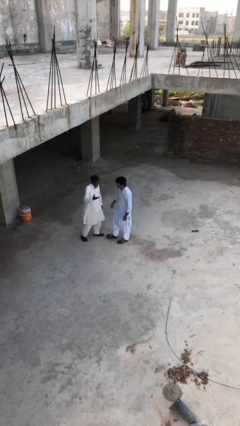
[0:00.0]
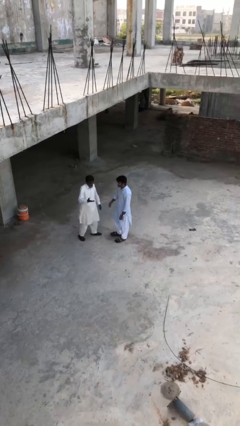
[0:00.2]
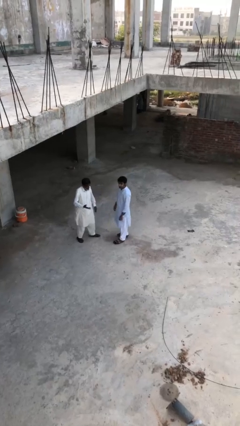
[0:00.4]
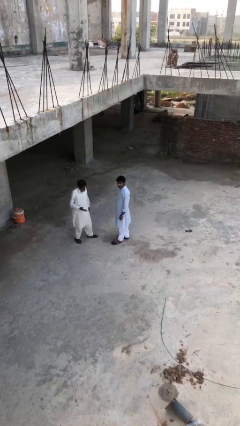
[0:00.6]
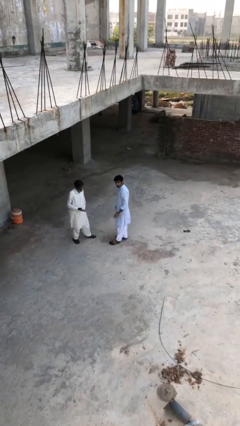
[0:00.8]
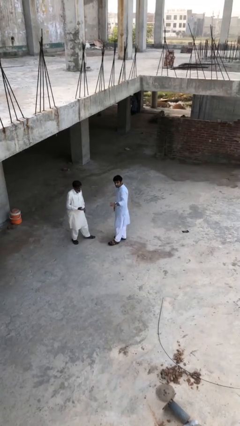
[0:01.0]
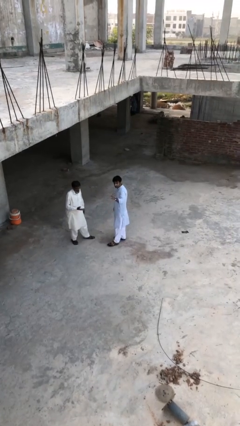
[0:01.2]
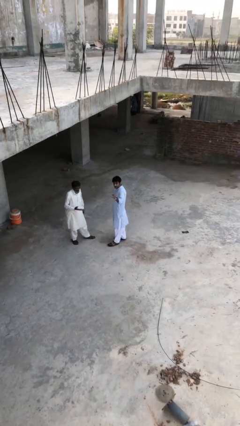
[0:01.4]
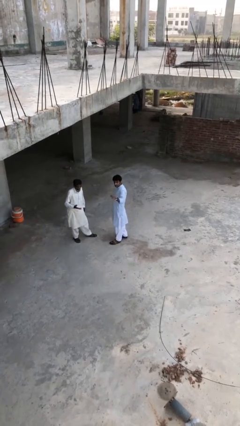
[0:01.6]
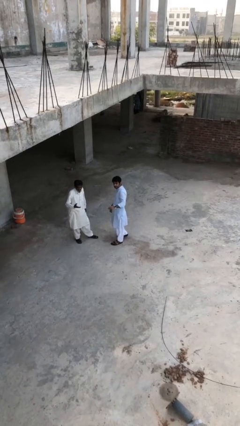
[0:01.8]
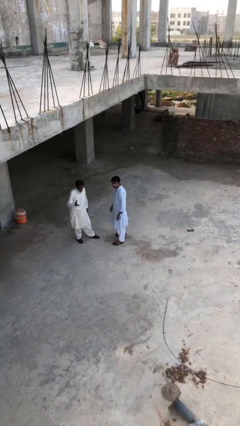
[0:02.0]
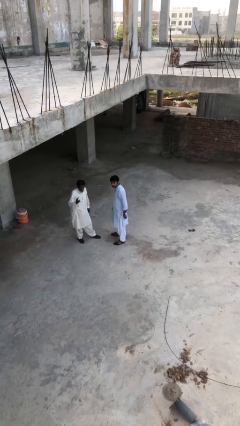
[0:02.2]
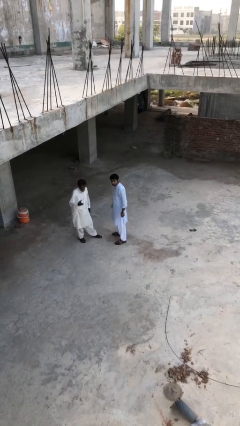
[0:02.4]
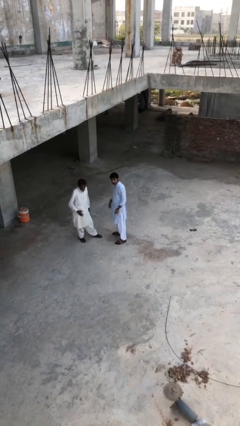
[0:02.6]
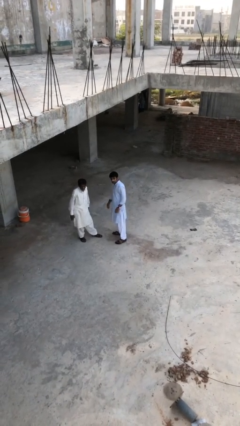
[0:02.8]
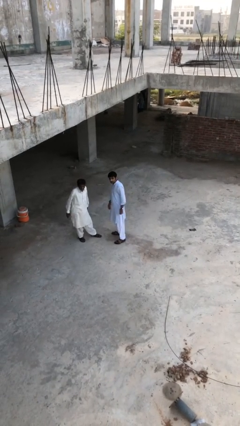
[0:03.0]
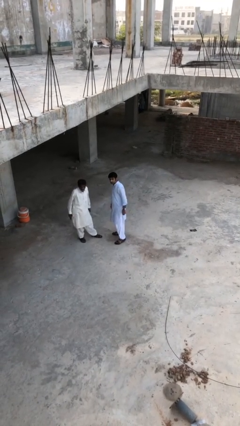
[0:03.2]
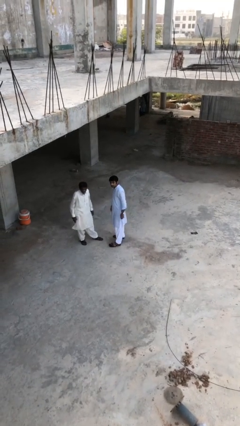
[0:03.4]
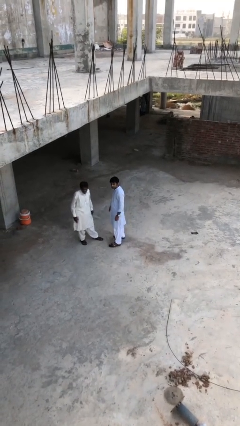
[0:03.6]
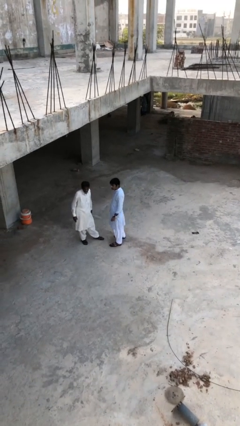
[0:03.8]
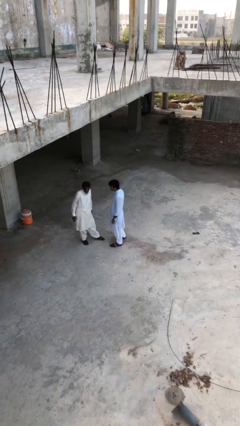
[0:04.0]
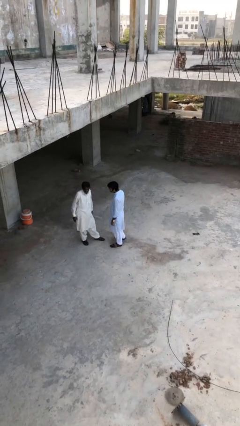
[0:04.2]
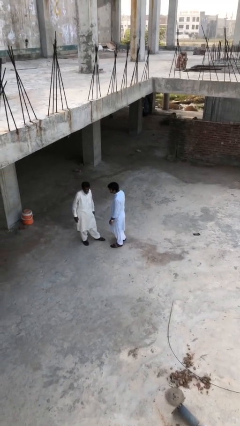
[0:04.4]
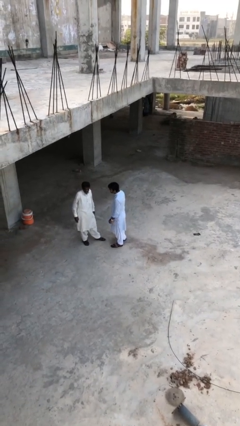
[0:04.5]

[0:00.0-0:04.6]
person talks to person

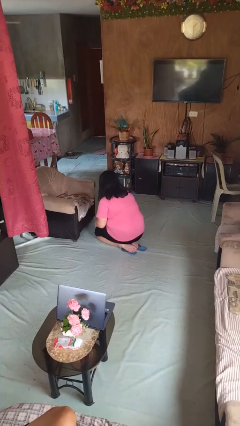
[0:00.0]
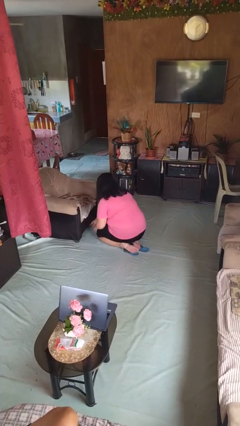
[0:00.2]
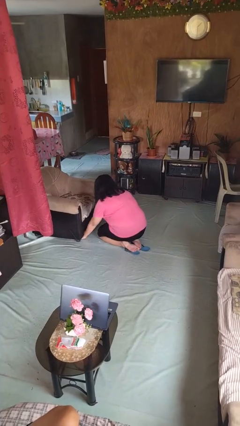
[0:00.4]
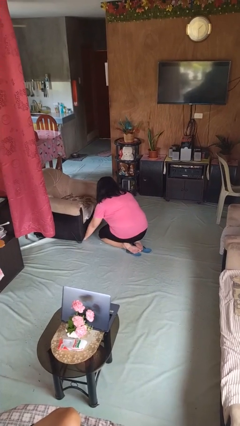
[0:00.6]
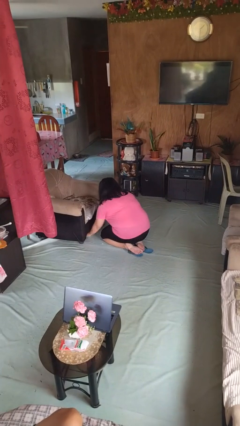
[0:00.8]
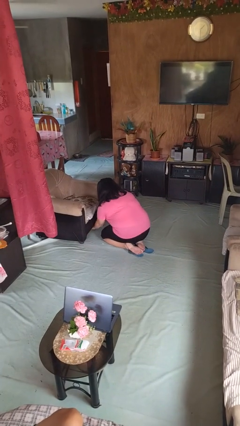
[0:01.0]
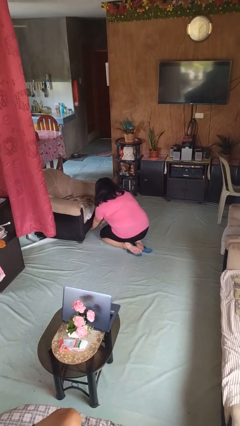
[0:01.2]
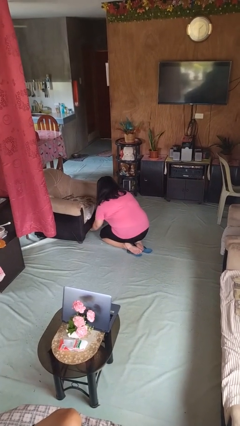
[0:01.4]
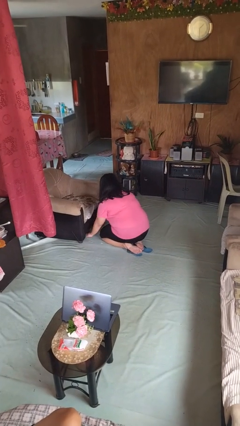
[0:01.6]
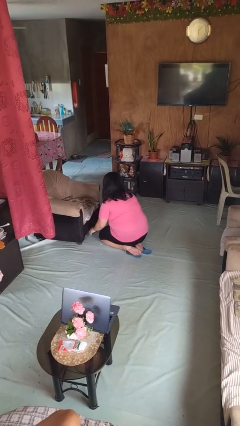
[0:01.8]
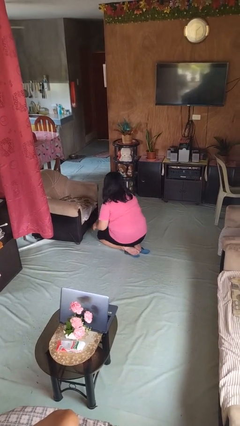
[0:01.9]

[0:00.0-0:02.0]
person searches under couch

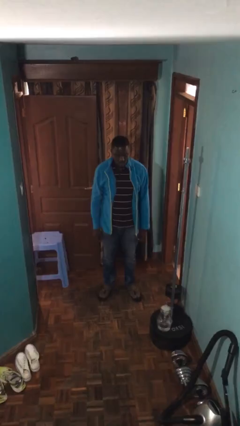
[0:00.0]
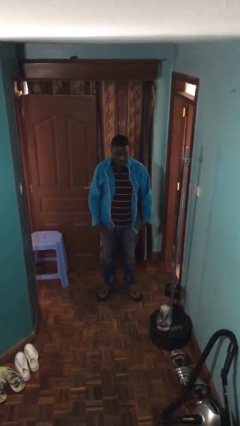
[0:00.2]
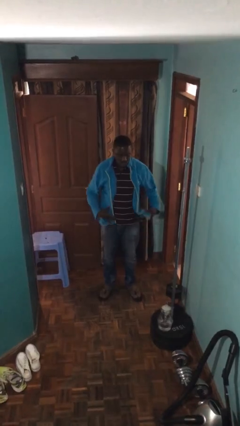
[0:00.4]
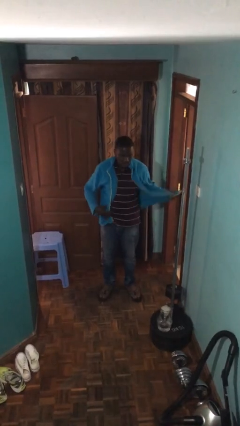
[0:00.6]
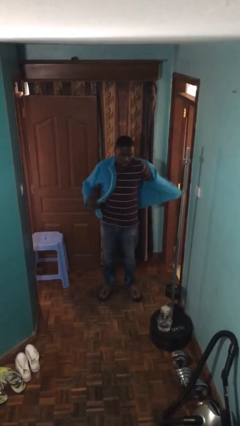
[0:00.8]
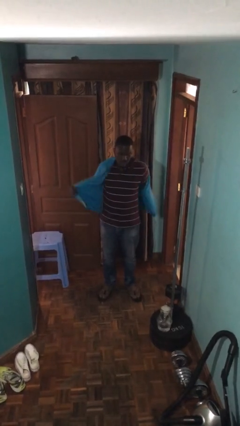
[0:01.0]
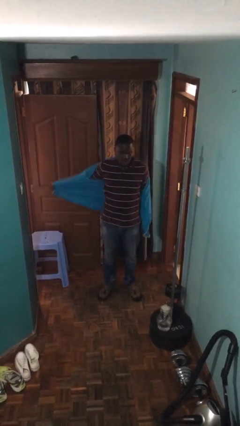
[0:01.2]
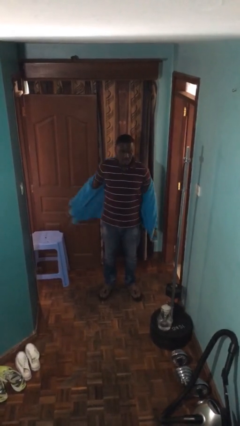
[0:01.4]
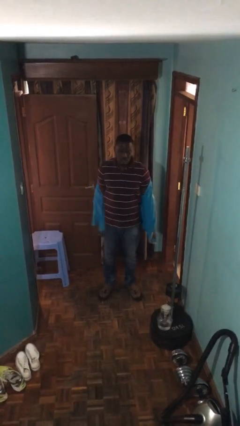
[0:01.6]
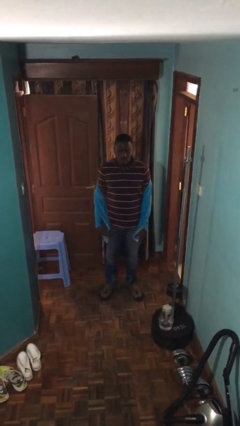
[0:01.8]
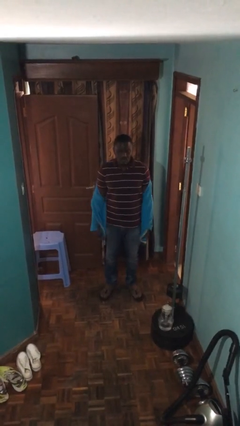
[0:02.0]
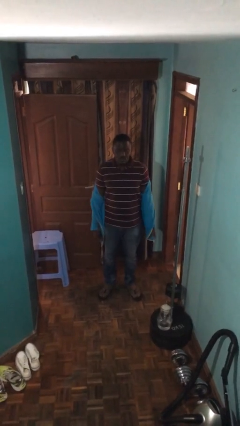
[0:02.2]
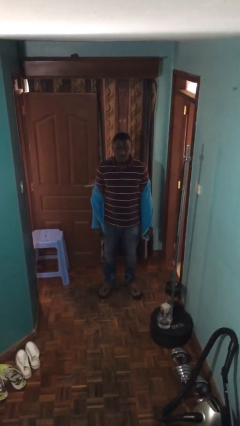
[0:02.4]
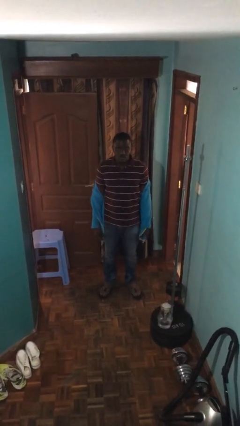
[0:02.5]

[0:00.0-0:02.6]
person takes off jacket

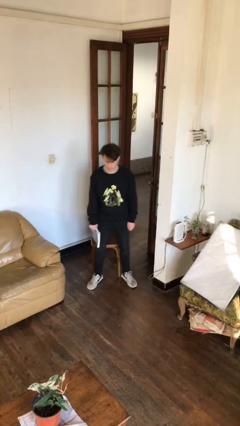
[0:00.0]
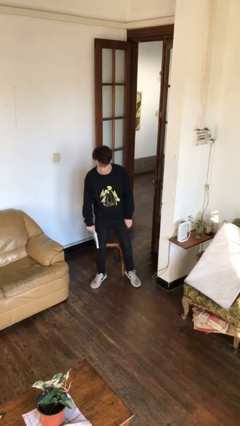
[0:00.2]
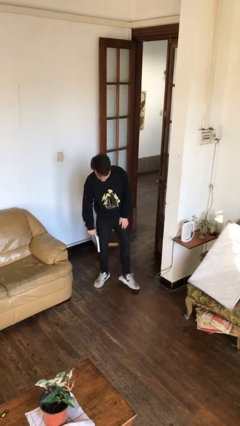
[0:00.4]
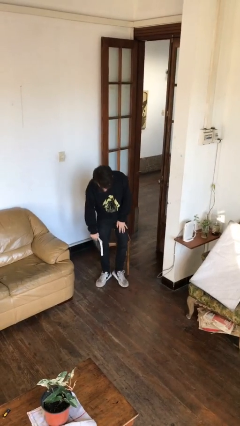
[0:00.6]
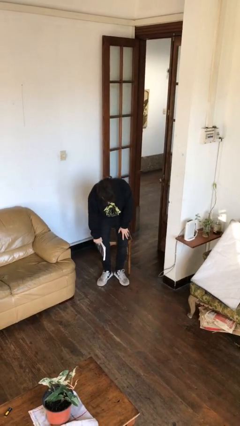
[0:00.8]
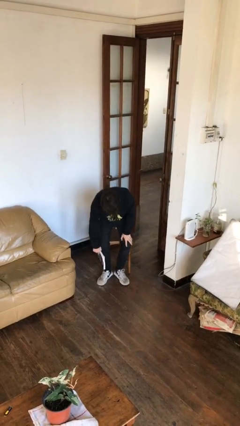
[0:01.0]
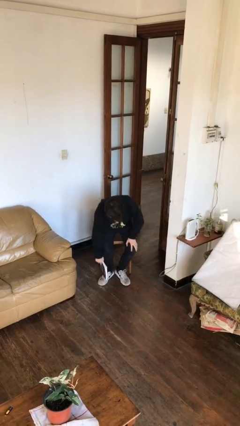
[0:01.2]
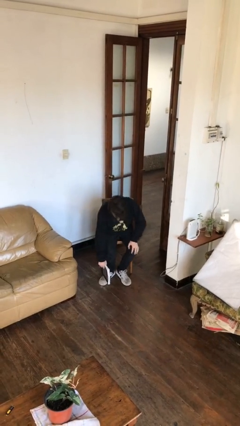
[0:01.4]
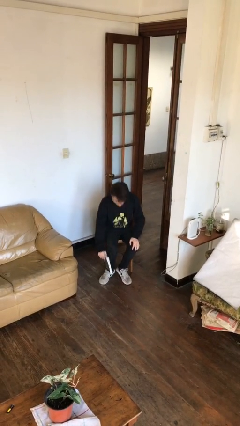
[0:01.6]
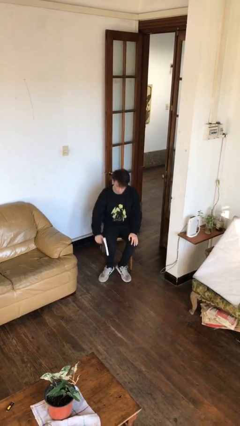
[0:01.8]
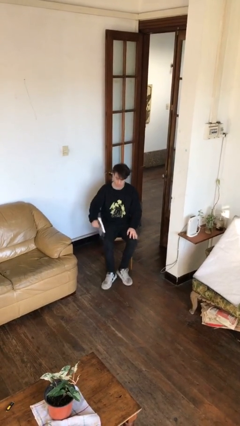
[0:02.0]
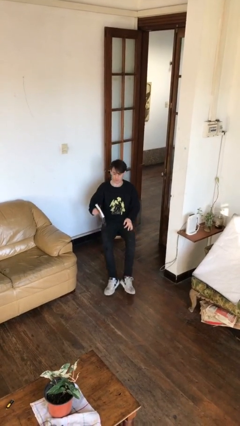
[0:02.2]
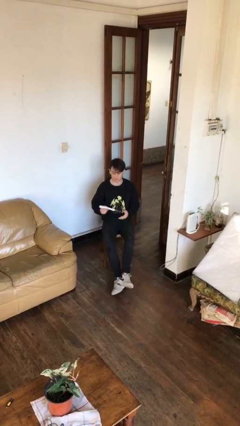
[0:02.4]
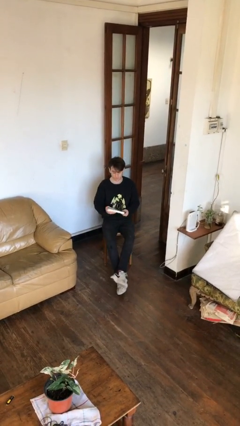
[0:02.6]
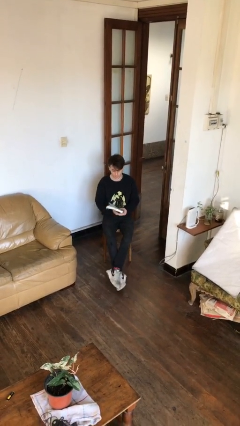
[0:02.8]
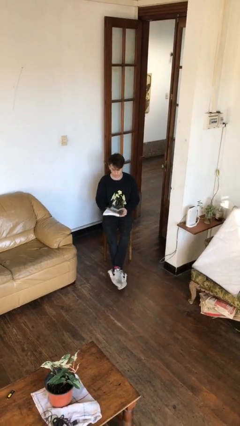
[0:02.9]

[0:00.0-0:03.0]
person sits down

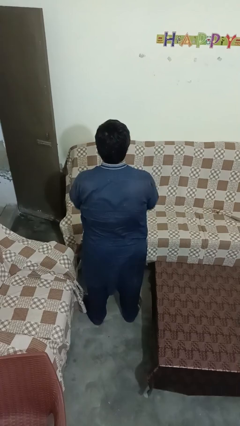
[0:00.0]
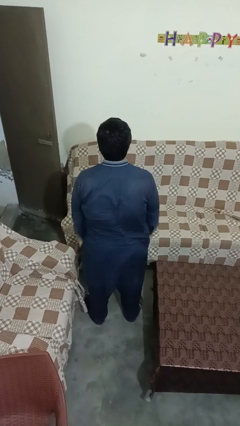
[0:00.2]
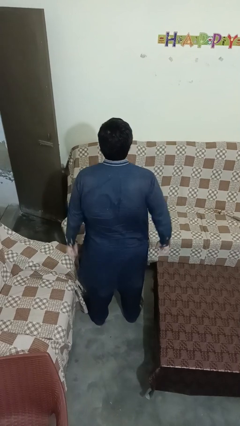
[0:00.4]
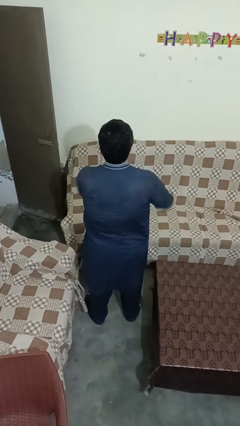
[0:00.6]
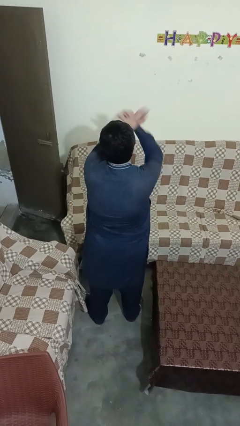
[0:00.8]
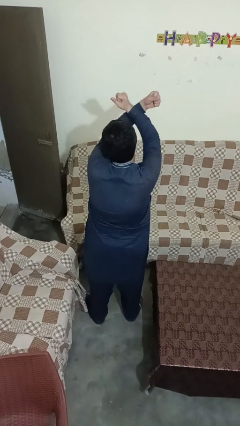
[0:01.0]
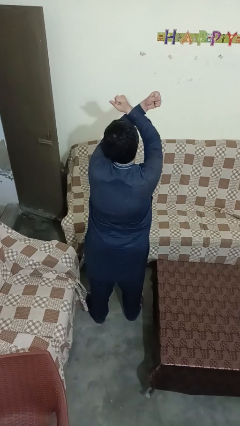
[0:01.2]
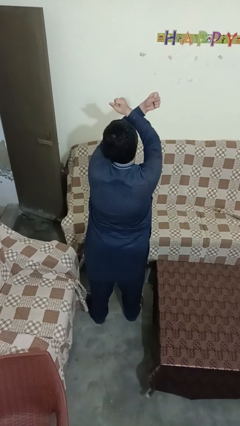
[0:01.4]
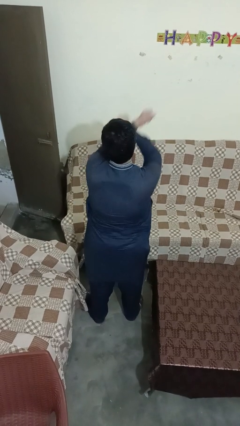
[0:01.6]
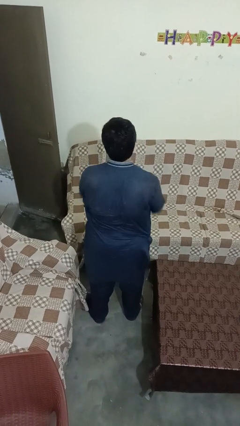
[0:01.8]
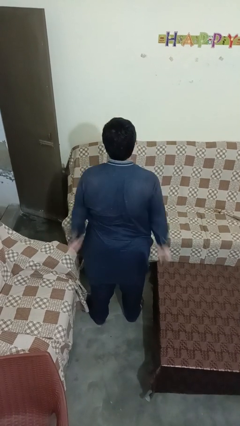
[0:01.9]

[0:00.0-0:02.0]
person gestures arms x

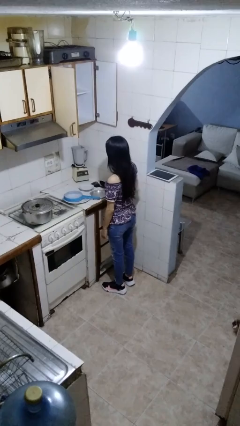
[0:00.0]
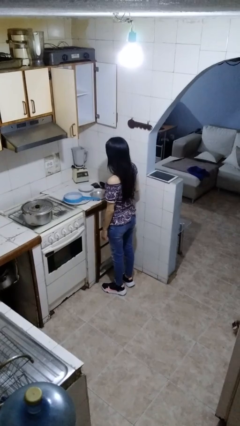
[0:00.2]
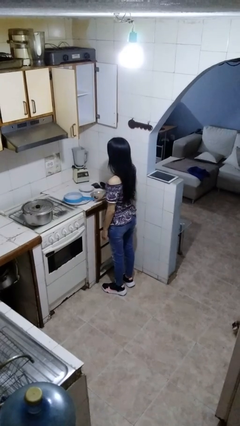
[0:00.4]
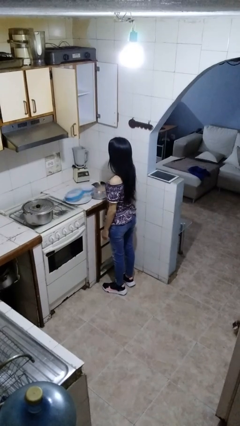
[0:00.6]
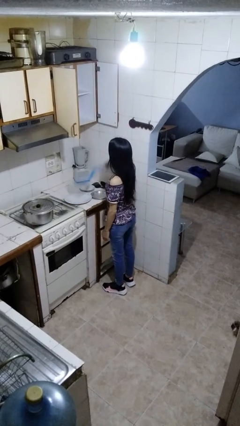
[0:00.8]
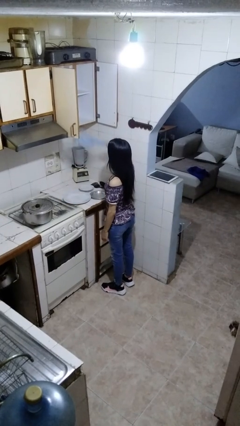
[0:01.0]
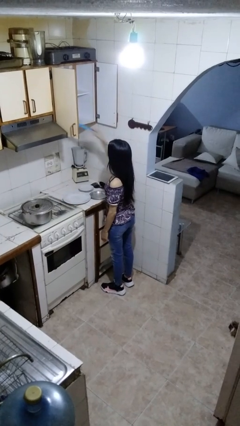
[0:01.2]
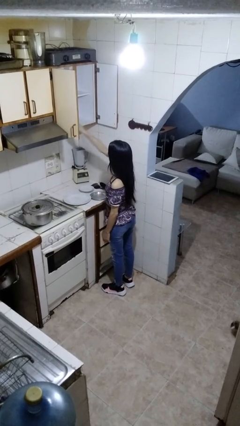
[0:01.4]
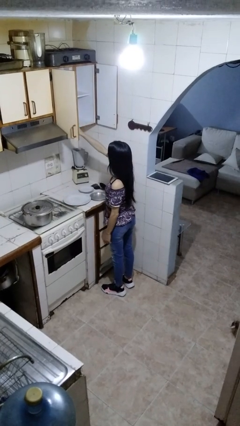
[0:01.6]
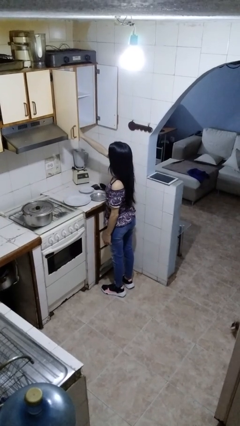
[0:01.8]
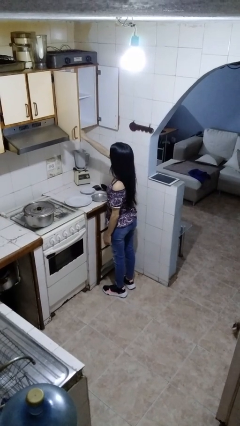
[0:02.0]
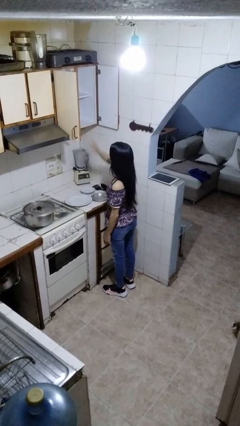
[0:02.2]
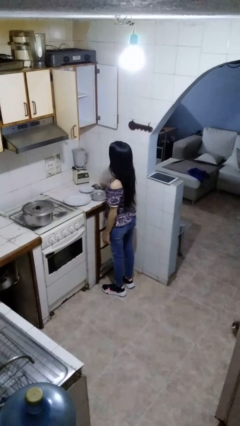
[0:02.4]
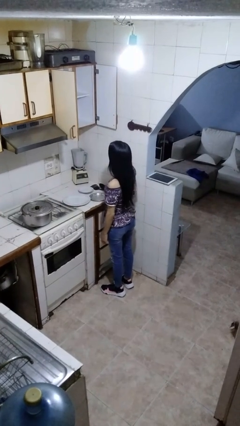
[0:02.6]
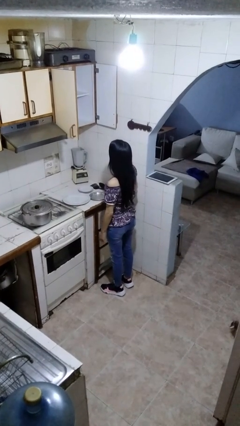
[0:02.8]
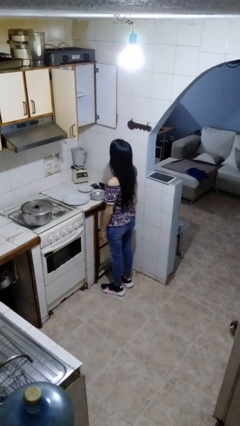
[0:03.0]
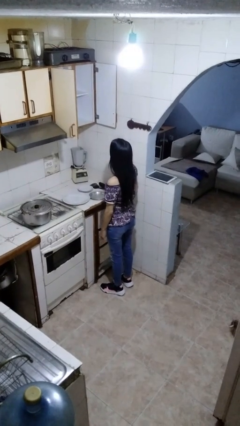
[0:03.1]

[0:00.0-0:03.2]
person puts object in cabinet

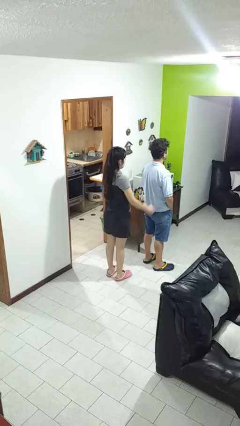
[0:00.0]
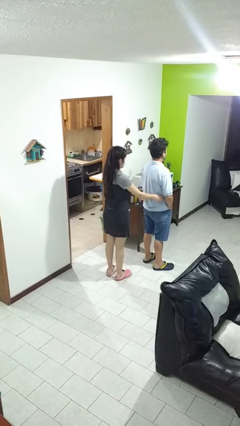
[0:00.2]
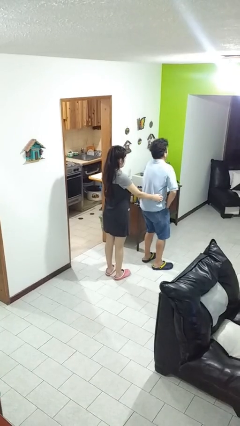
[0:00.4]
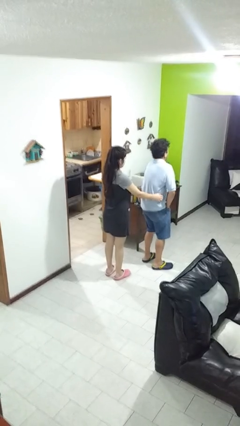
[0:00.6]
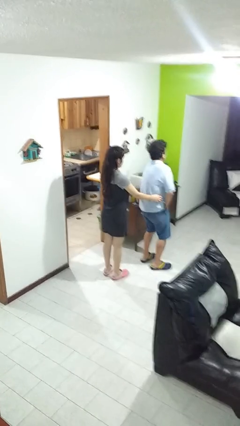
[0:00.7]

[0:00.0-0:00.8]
person tickles person
